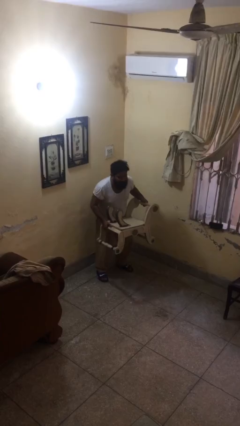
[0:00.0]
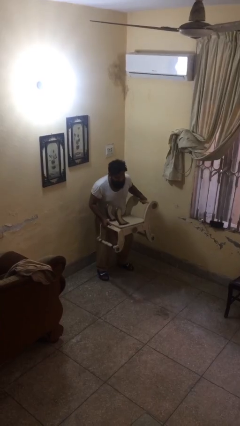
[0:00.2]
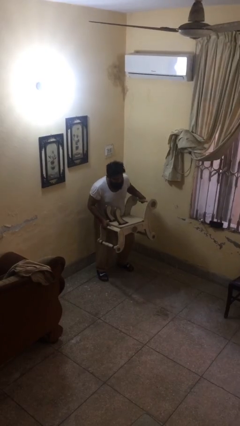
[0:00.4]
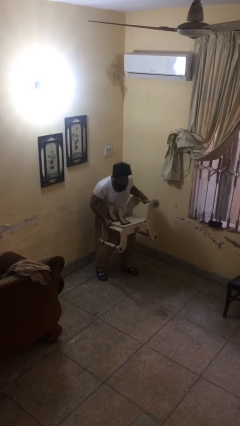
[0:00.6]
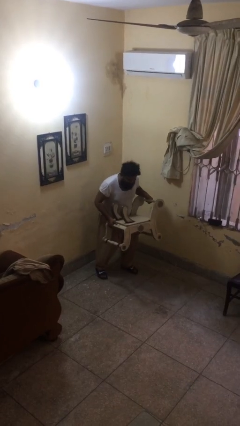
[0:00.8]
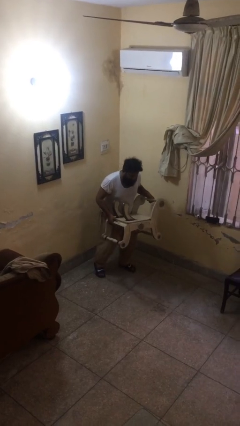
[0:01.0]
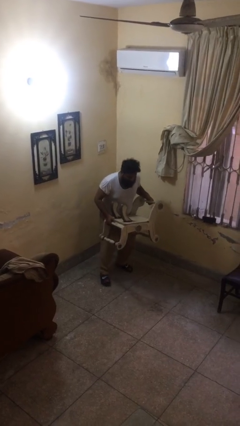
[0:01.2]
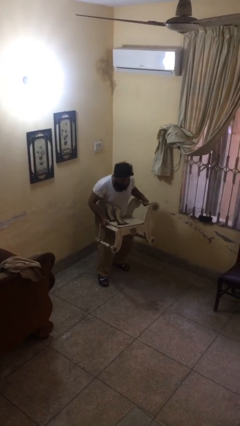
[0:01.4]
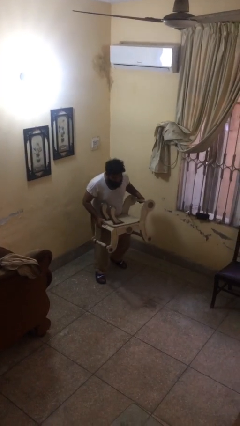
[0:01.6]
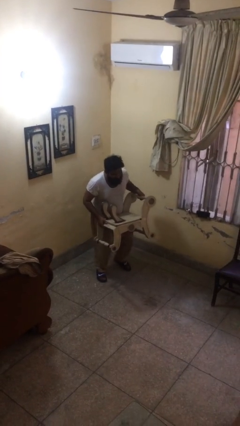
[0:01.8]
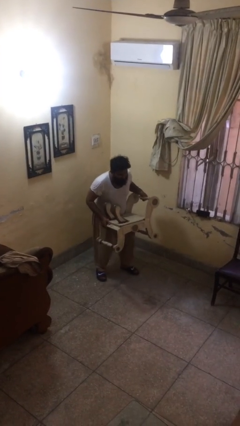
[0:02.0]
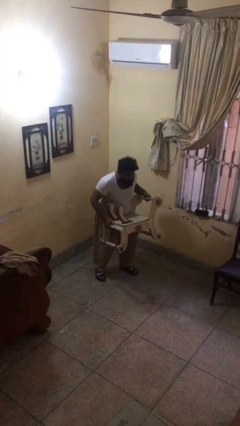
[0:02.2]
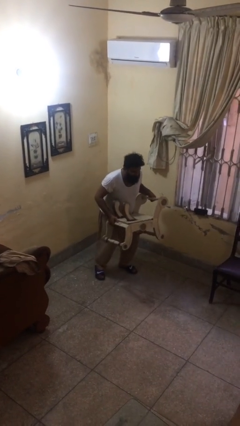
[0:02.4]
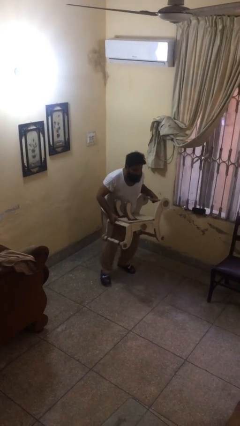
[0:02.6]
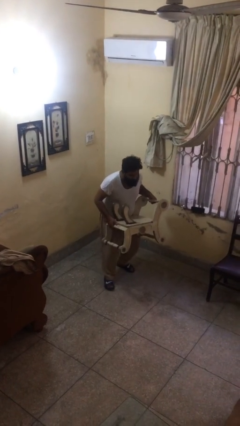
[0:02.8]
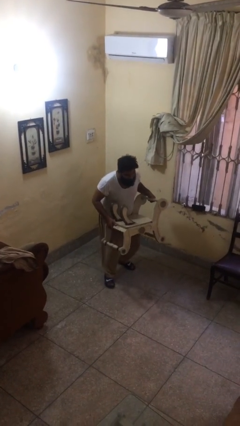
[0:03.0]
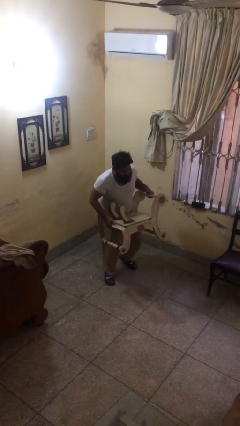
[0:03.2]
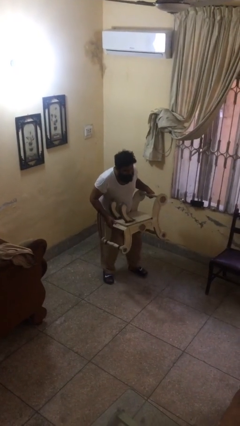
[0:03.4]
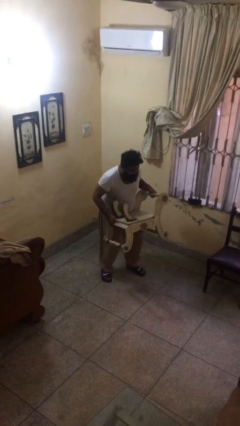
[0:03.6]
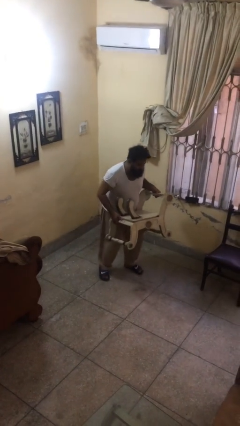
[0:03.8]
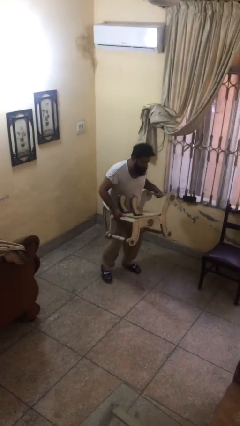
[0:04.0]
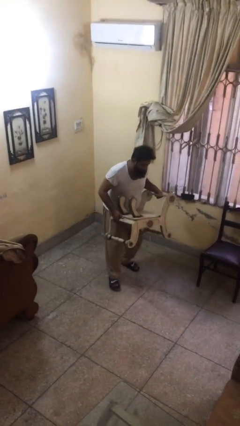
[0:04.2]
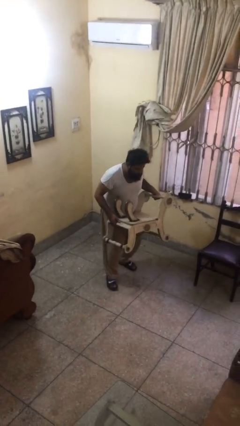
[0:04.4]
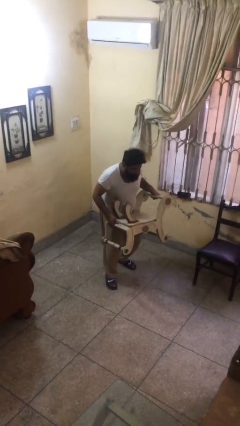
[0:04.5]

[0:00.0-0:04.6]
person carries heavy object

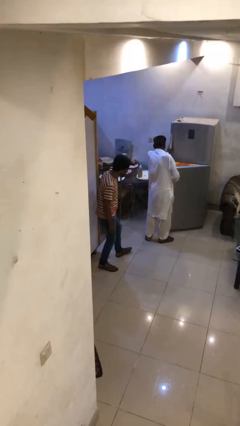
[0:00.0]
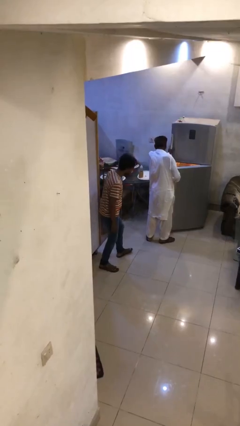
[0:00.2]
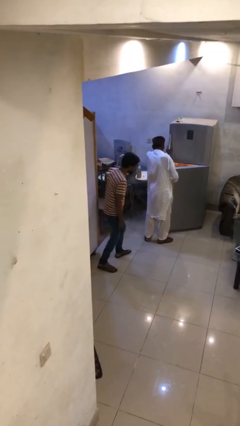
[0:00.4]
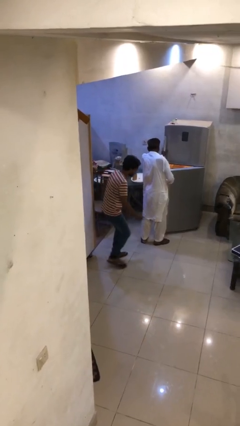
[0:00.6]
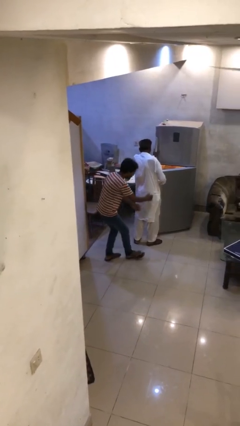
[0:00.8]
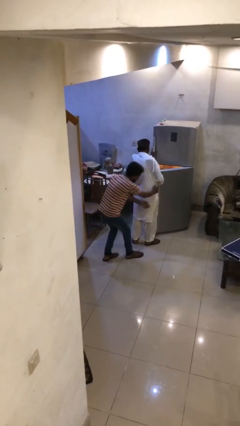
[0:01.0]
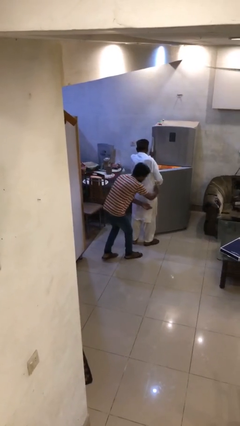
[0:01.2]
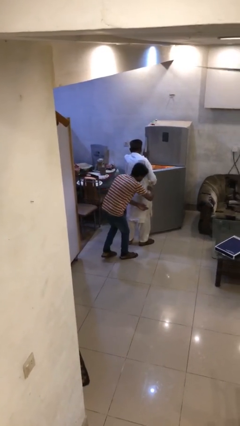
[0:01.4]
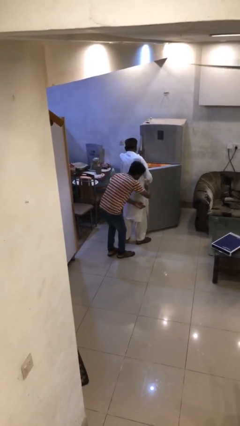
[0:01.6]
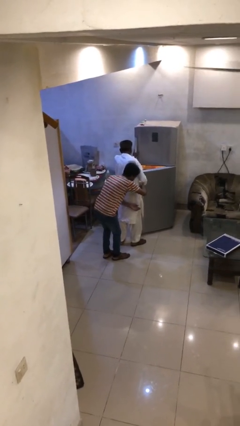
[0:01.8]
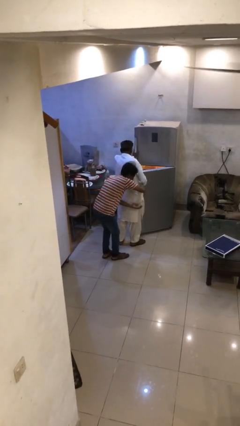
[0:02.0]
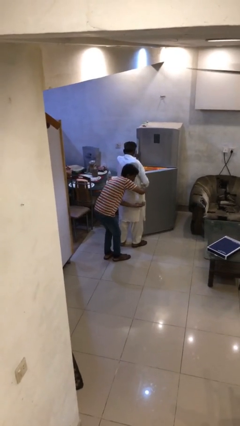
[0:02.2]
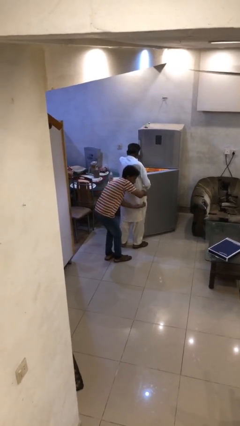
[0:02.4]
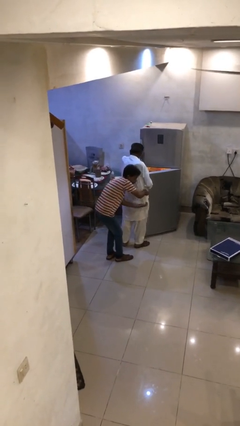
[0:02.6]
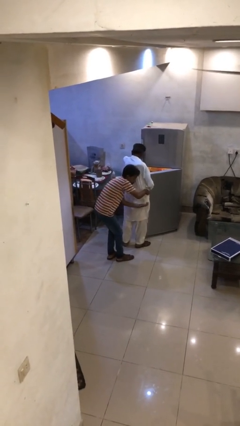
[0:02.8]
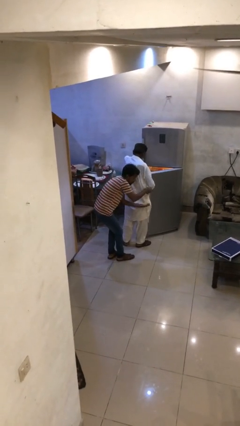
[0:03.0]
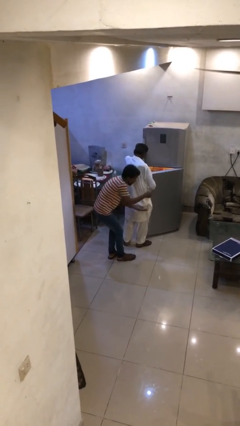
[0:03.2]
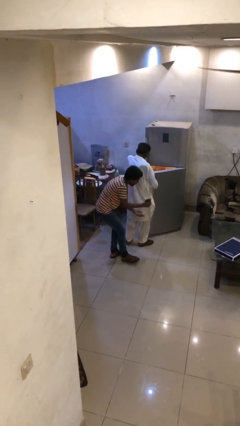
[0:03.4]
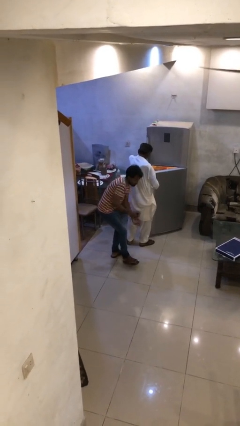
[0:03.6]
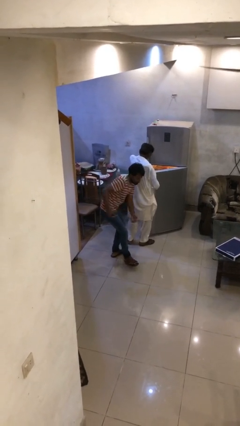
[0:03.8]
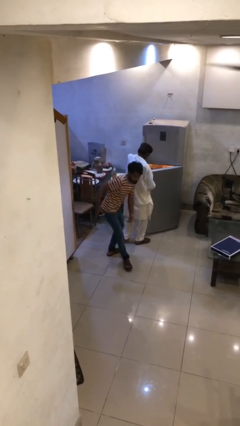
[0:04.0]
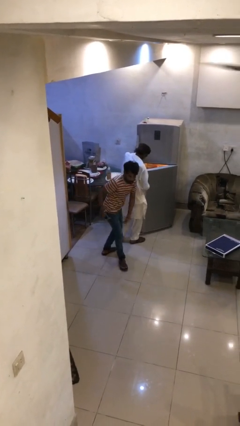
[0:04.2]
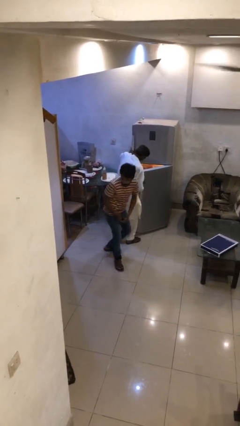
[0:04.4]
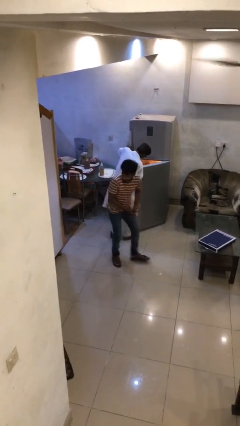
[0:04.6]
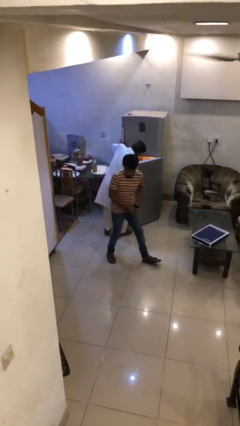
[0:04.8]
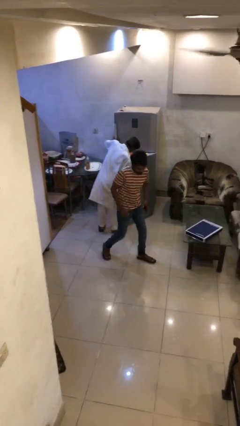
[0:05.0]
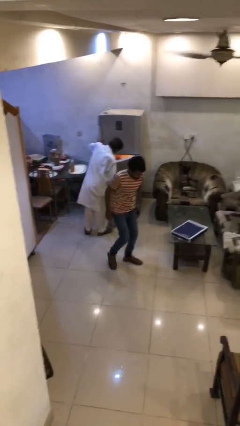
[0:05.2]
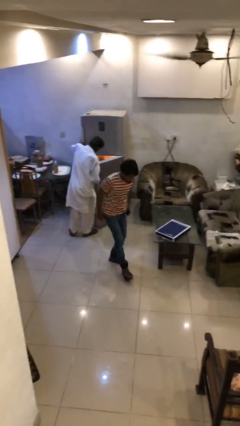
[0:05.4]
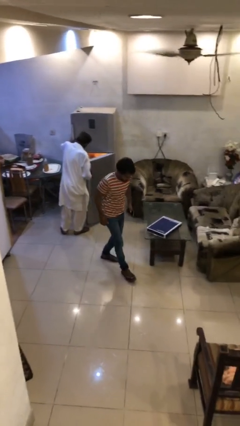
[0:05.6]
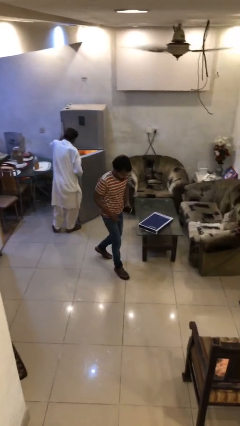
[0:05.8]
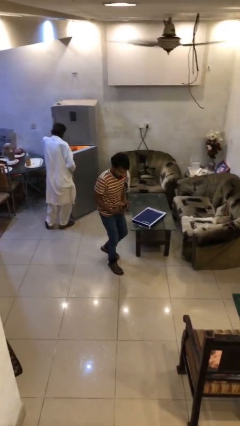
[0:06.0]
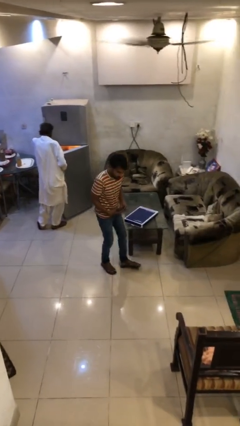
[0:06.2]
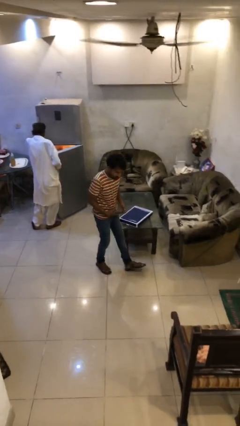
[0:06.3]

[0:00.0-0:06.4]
person steals object from person

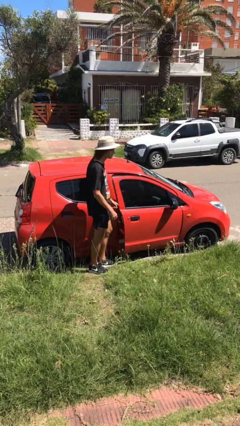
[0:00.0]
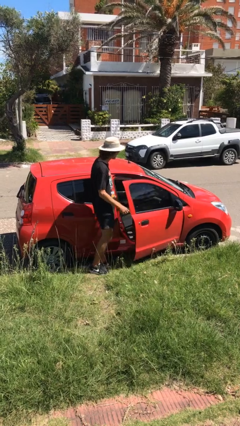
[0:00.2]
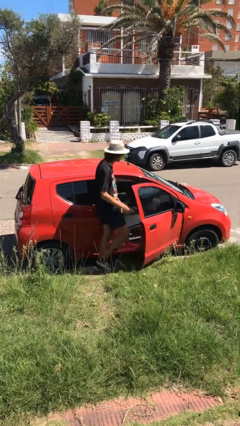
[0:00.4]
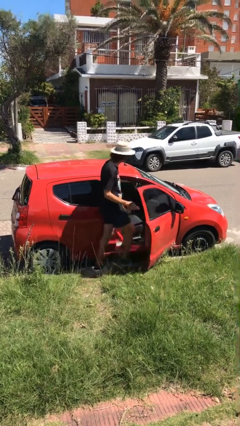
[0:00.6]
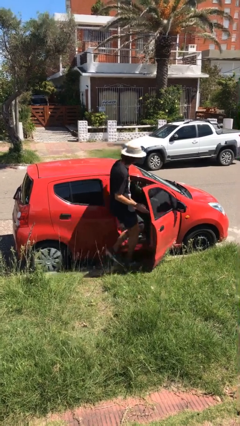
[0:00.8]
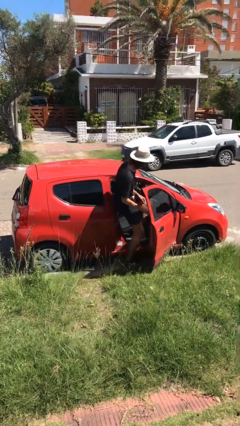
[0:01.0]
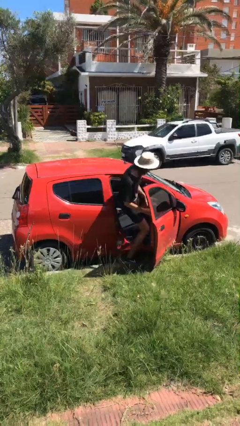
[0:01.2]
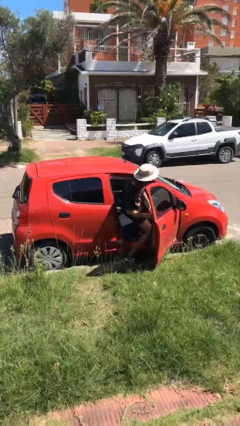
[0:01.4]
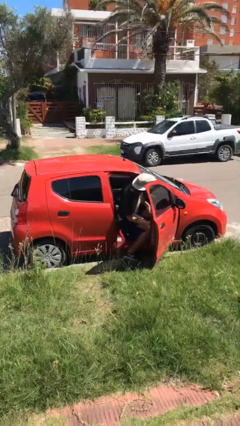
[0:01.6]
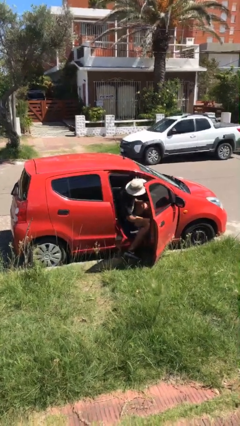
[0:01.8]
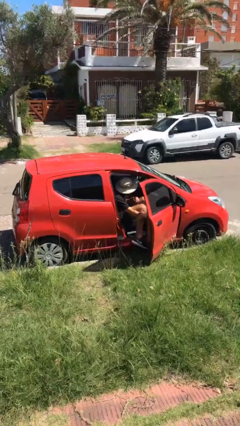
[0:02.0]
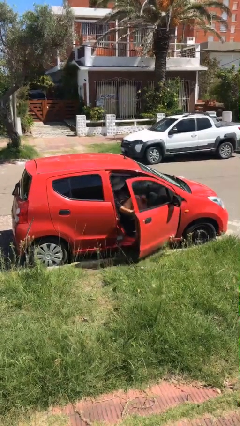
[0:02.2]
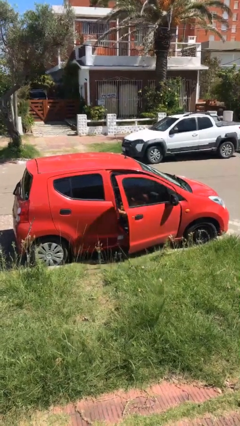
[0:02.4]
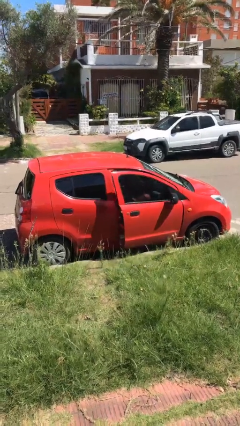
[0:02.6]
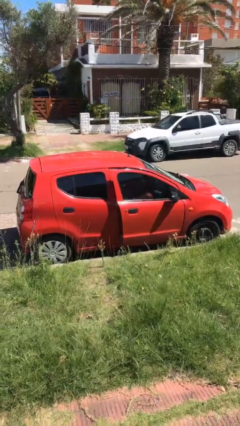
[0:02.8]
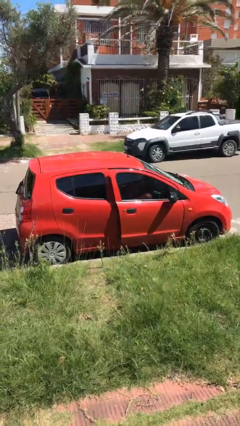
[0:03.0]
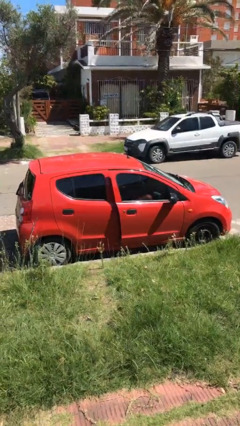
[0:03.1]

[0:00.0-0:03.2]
car picks up person

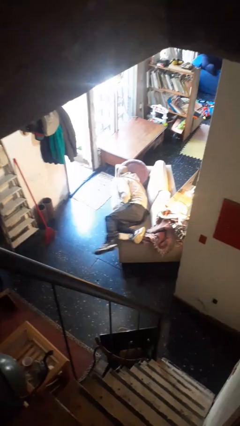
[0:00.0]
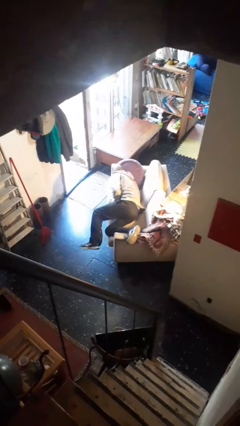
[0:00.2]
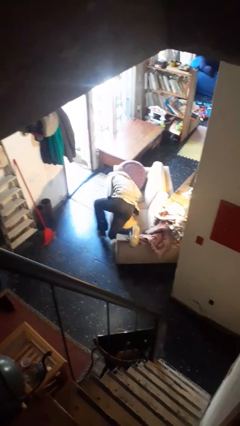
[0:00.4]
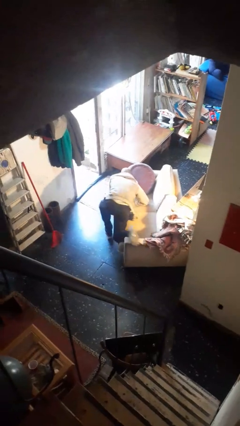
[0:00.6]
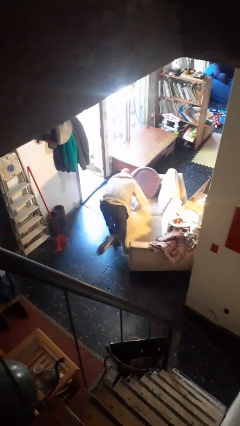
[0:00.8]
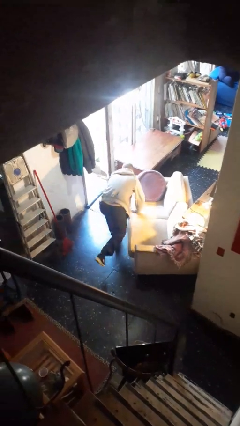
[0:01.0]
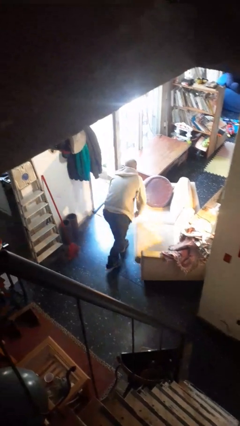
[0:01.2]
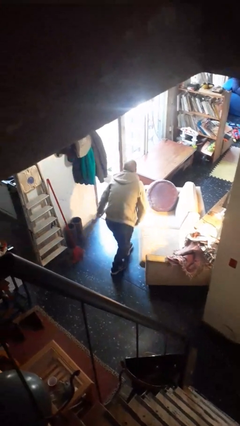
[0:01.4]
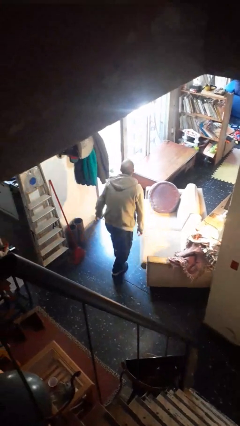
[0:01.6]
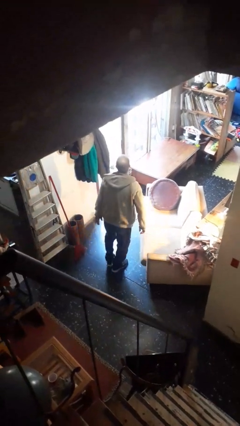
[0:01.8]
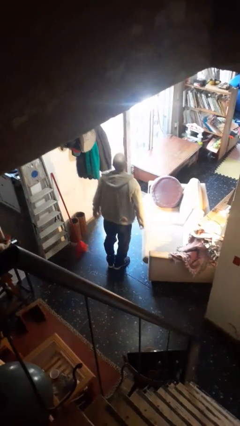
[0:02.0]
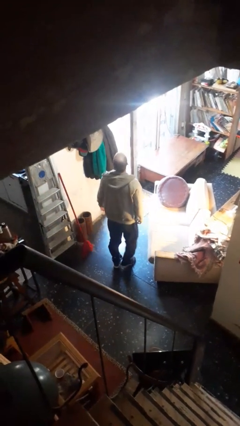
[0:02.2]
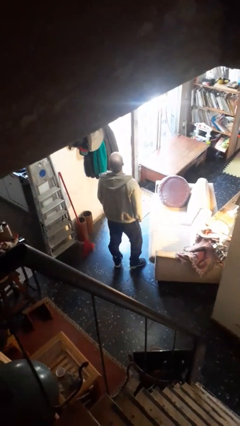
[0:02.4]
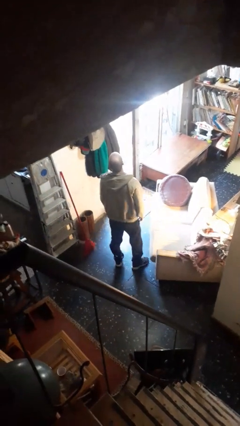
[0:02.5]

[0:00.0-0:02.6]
person stands up

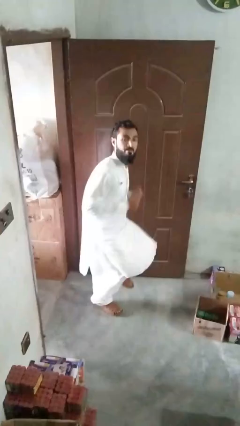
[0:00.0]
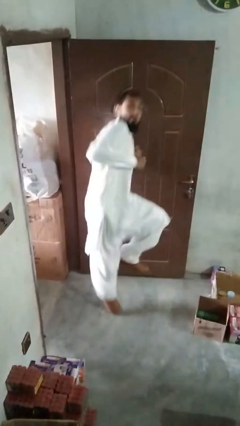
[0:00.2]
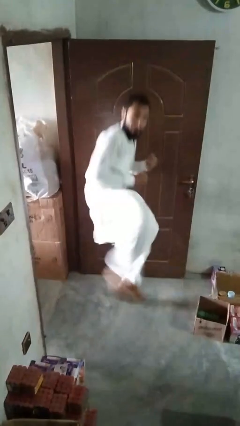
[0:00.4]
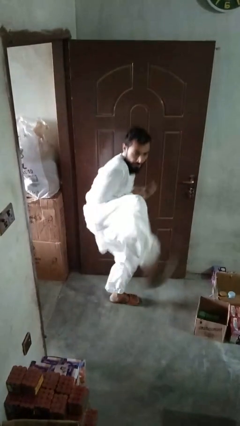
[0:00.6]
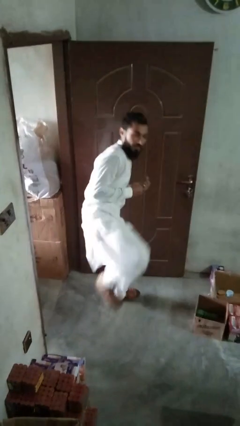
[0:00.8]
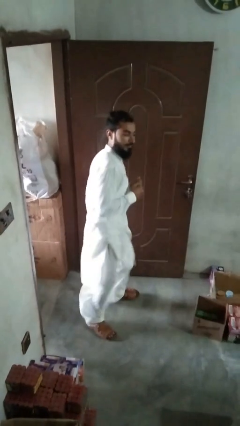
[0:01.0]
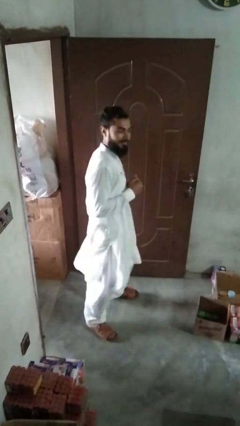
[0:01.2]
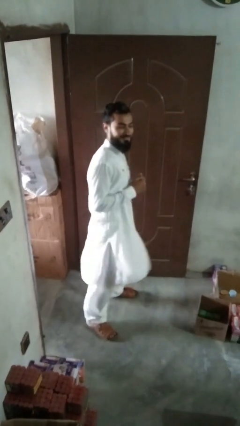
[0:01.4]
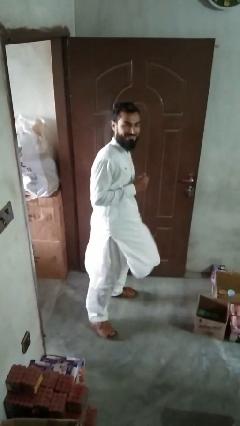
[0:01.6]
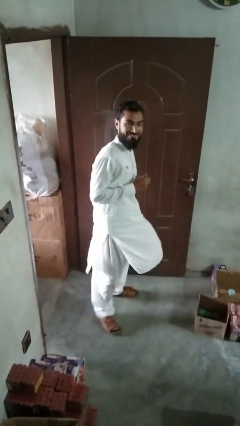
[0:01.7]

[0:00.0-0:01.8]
person karate kicks
